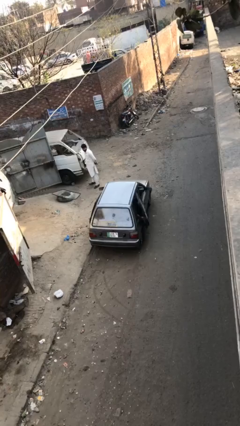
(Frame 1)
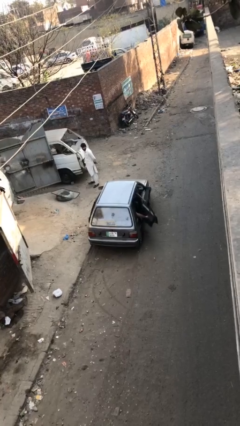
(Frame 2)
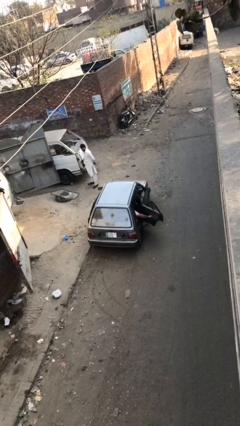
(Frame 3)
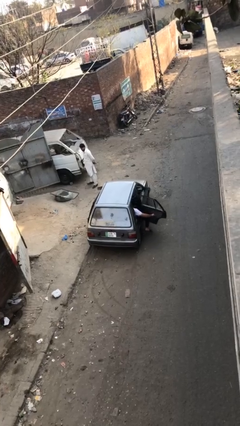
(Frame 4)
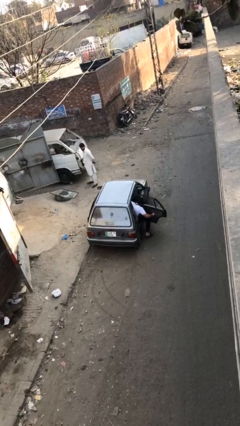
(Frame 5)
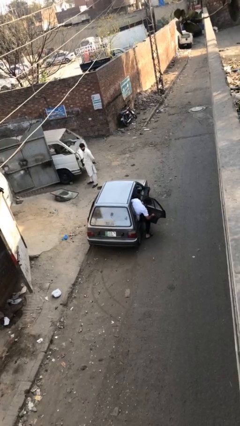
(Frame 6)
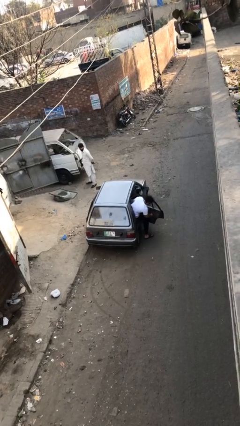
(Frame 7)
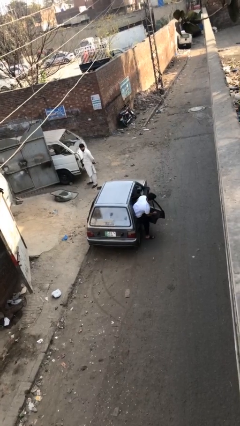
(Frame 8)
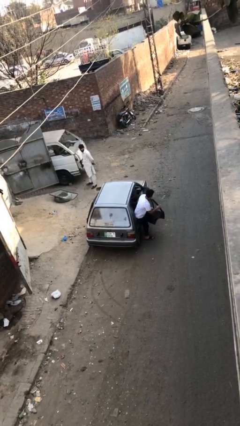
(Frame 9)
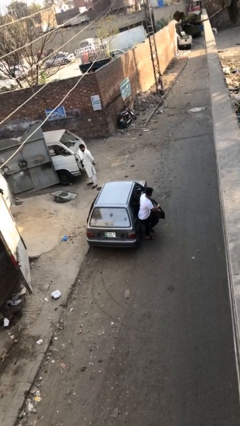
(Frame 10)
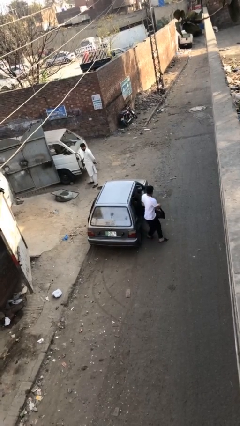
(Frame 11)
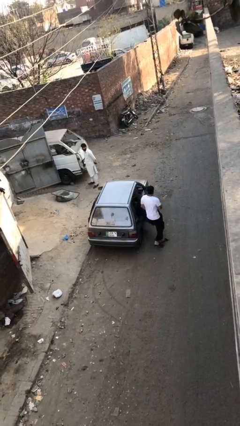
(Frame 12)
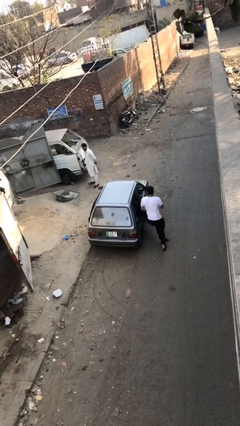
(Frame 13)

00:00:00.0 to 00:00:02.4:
car drops off person

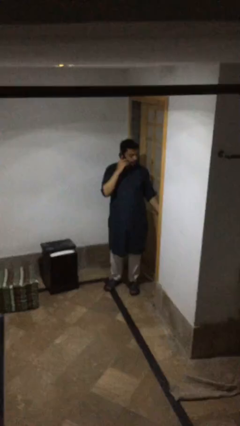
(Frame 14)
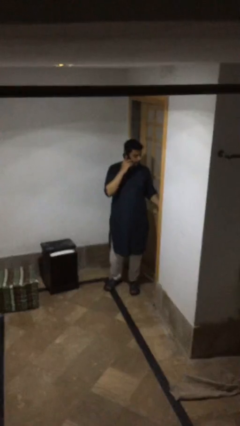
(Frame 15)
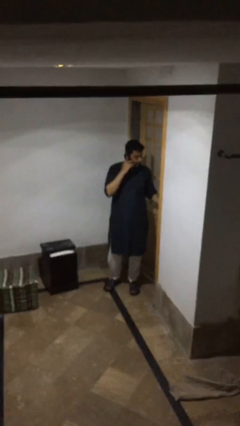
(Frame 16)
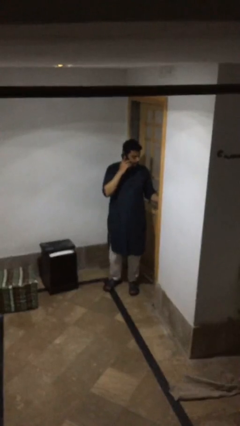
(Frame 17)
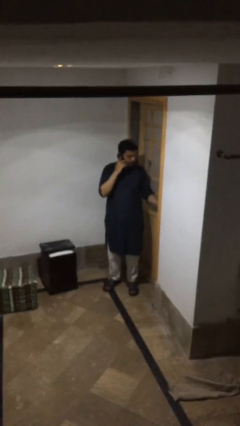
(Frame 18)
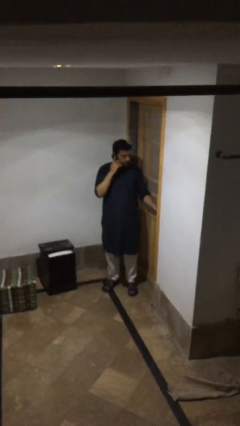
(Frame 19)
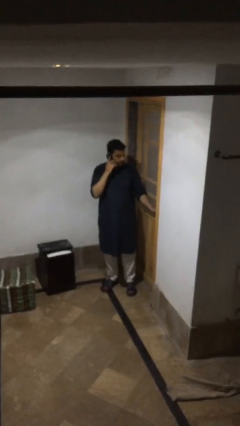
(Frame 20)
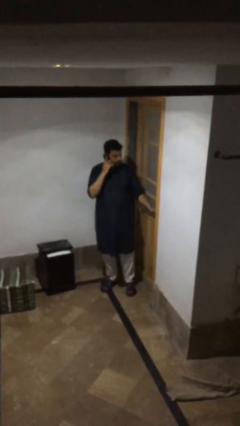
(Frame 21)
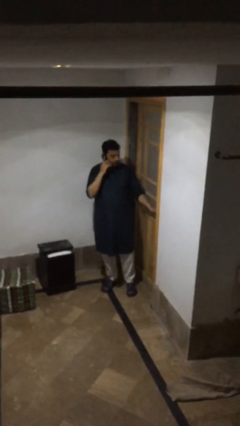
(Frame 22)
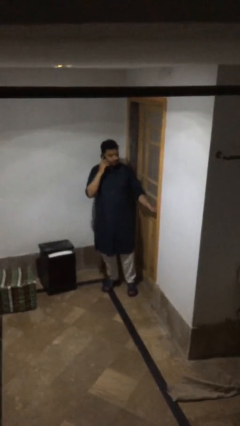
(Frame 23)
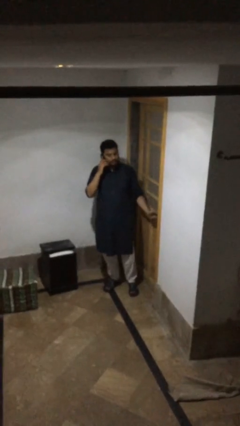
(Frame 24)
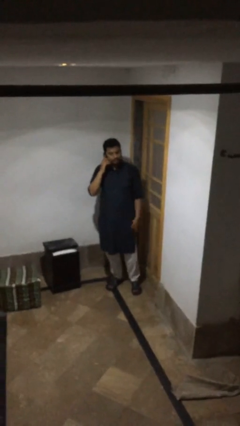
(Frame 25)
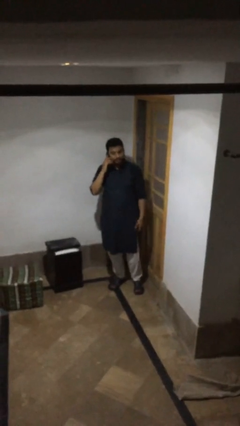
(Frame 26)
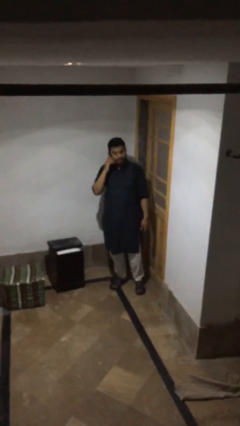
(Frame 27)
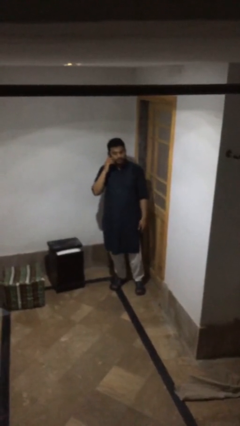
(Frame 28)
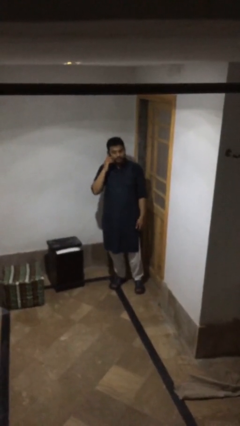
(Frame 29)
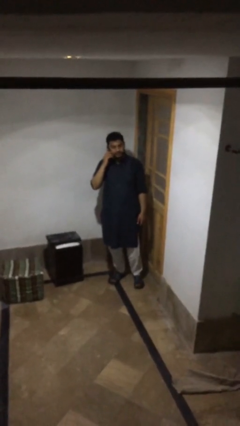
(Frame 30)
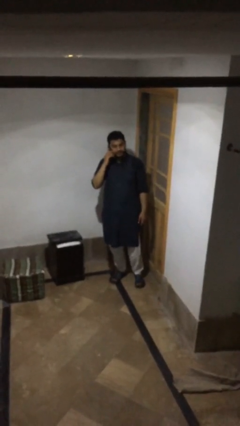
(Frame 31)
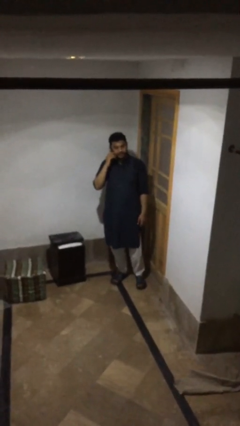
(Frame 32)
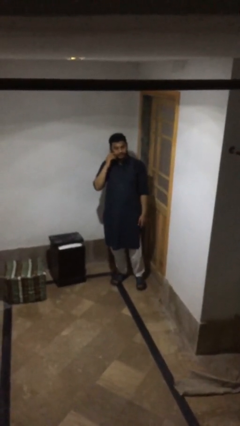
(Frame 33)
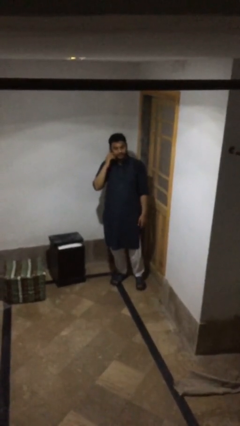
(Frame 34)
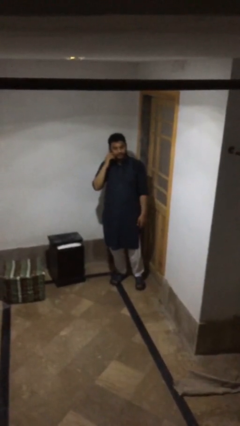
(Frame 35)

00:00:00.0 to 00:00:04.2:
person closes facility door

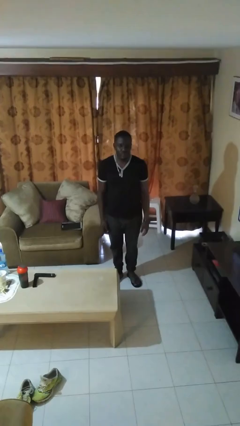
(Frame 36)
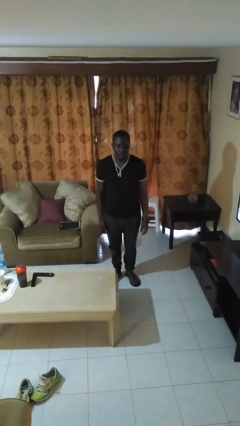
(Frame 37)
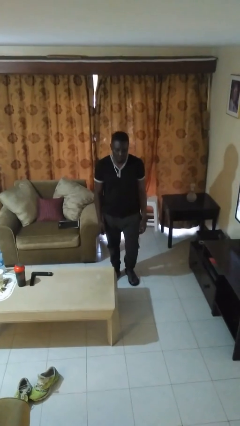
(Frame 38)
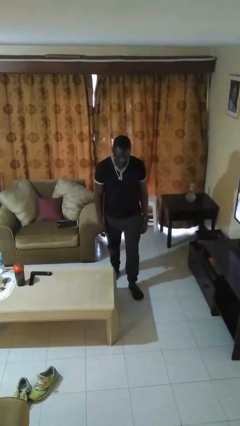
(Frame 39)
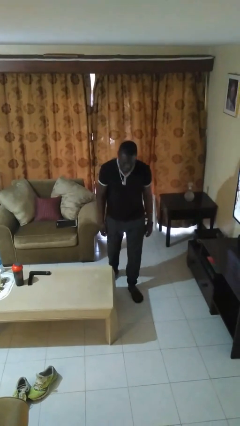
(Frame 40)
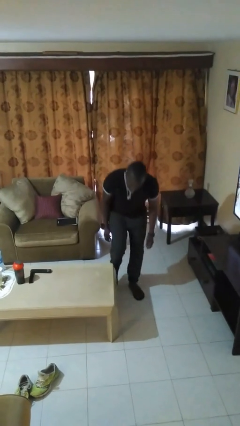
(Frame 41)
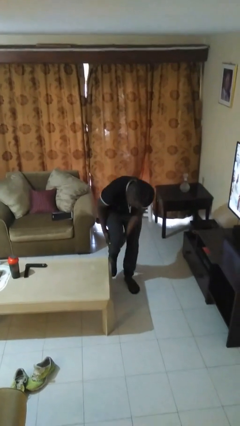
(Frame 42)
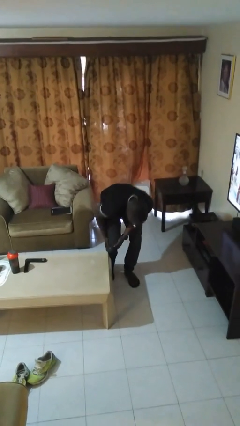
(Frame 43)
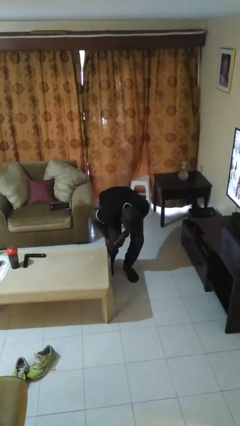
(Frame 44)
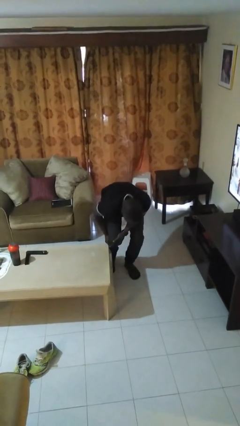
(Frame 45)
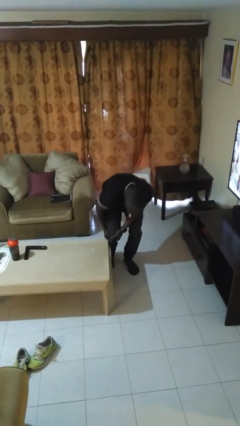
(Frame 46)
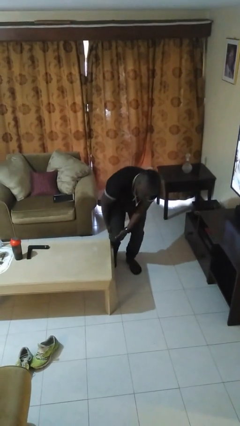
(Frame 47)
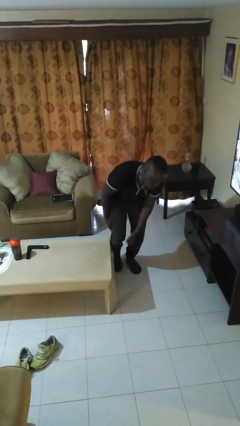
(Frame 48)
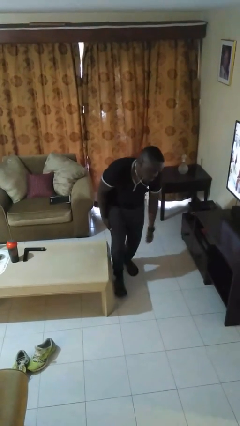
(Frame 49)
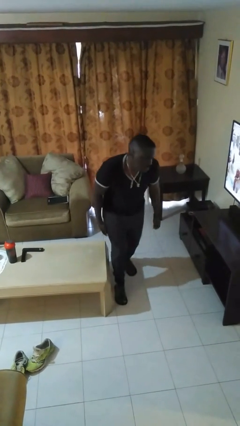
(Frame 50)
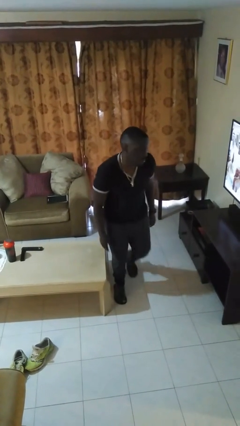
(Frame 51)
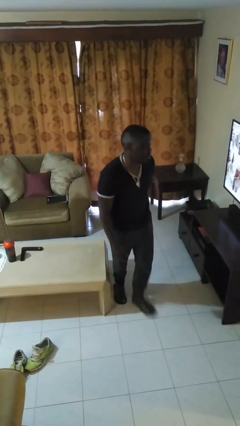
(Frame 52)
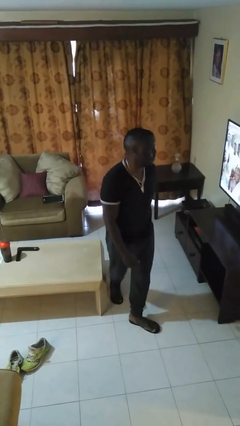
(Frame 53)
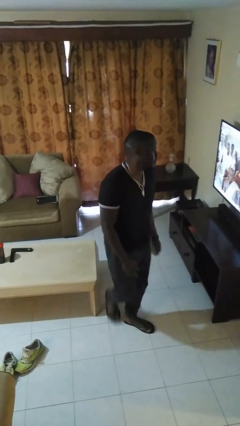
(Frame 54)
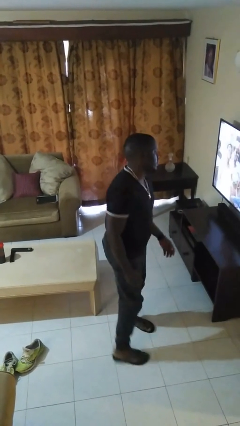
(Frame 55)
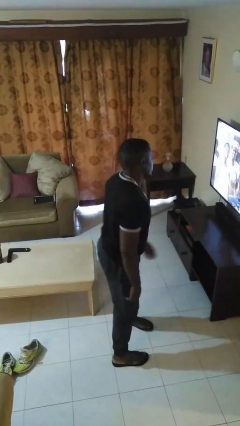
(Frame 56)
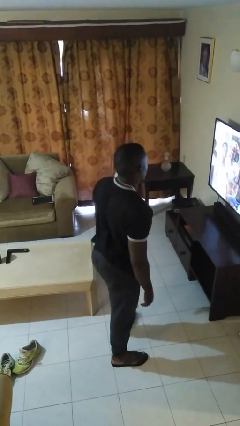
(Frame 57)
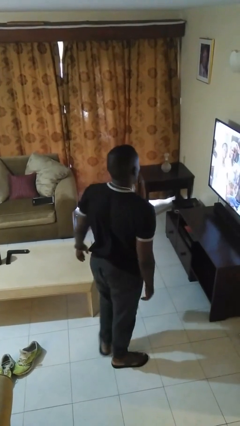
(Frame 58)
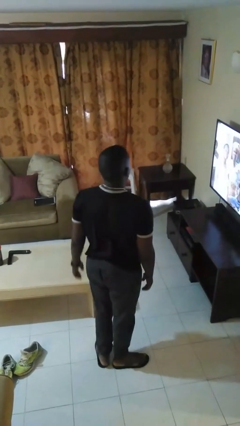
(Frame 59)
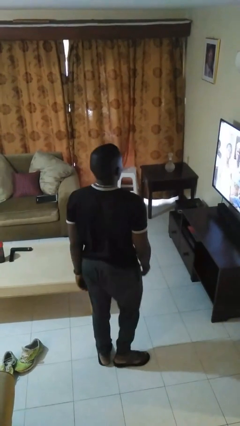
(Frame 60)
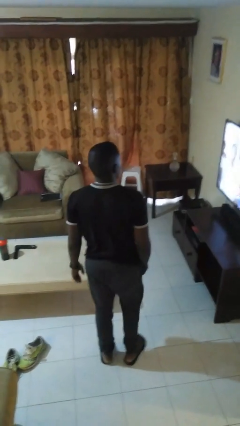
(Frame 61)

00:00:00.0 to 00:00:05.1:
person bumps into table

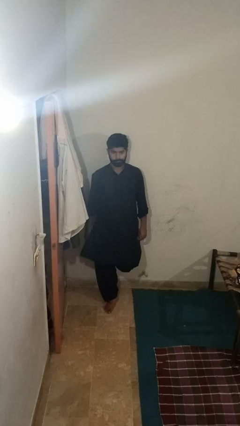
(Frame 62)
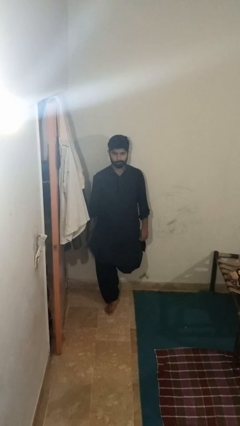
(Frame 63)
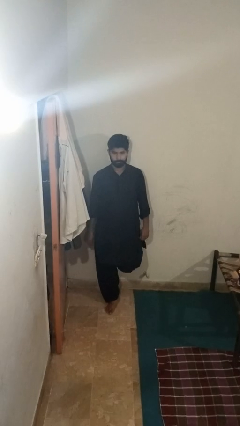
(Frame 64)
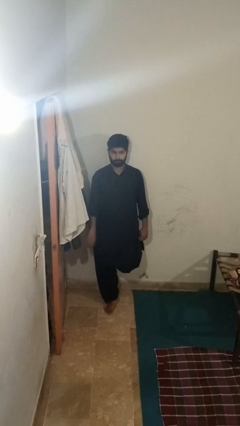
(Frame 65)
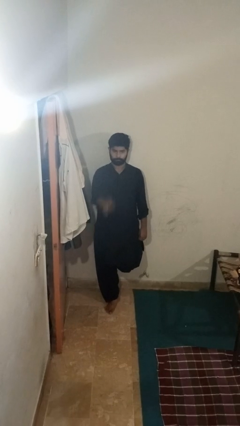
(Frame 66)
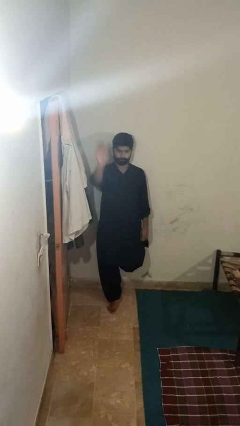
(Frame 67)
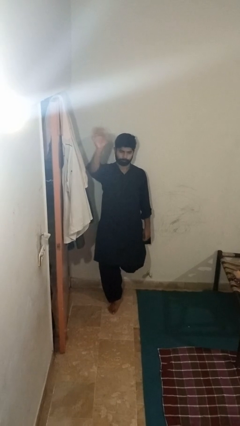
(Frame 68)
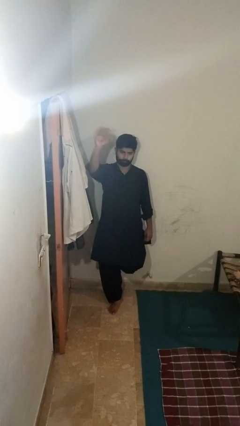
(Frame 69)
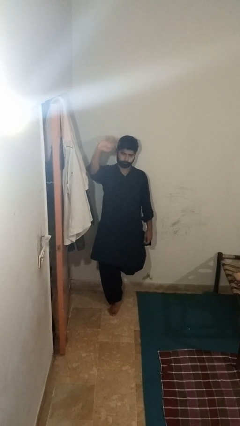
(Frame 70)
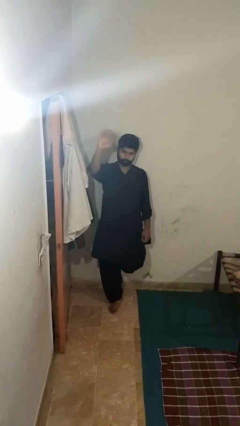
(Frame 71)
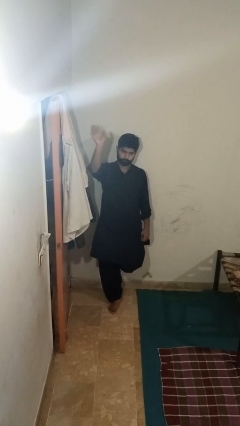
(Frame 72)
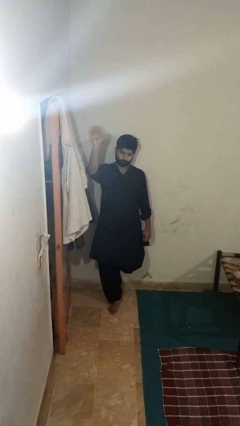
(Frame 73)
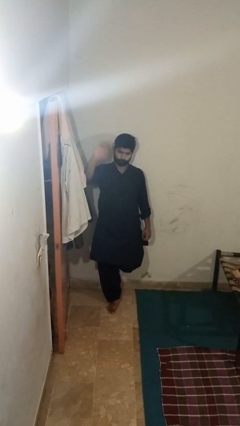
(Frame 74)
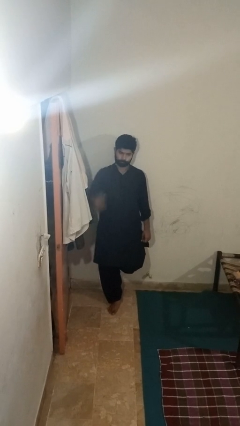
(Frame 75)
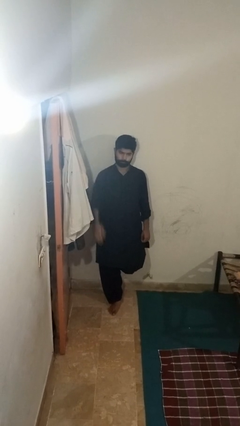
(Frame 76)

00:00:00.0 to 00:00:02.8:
person waves at person

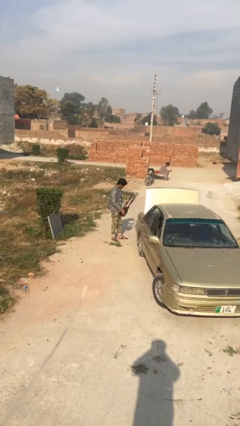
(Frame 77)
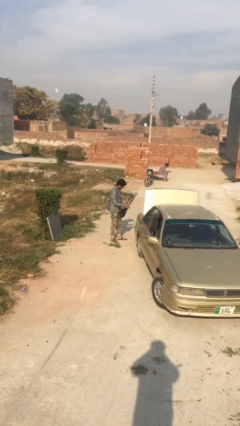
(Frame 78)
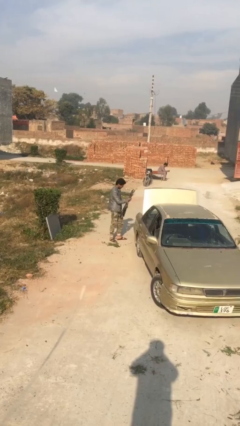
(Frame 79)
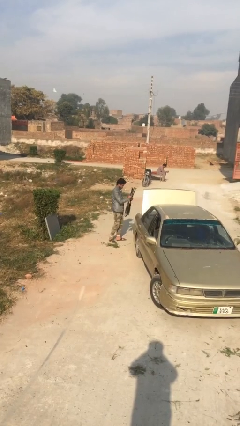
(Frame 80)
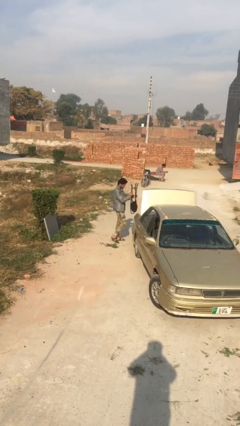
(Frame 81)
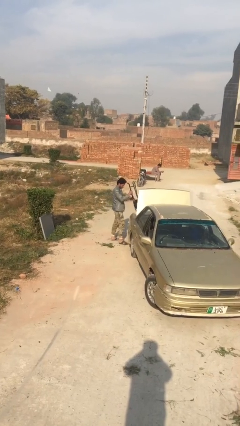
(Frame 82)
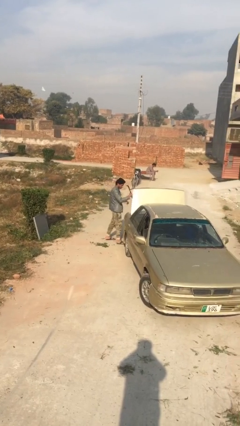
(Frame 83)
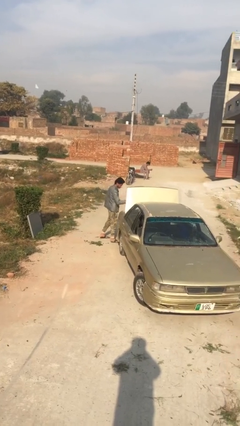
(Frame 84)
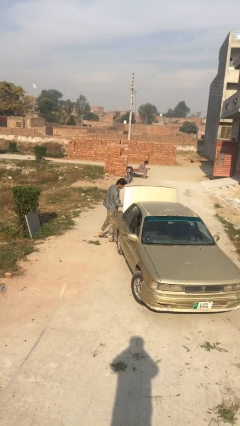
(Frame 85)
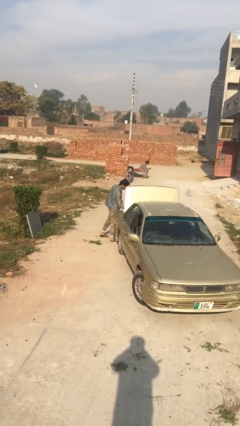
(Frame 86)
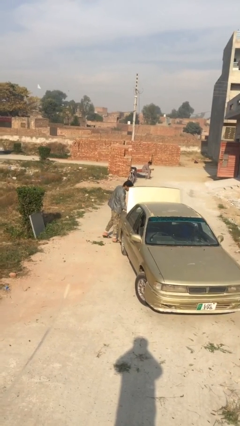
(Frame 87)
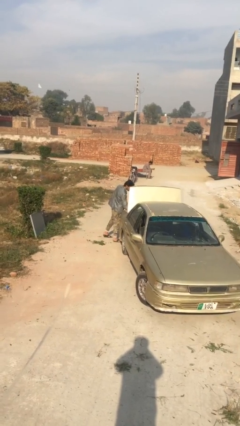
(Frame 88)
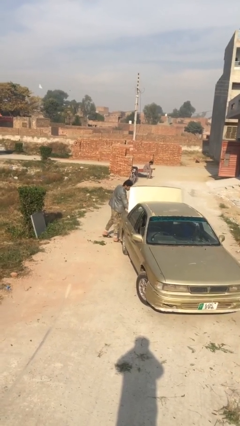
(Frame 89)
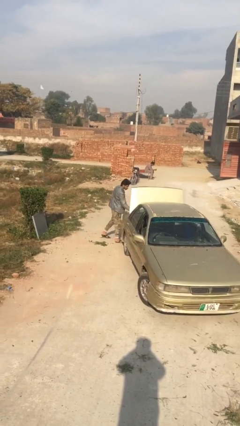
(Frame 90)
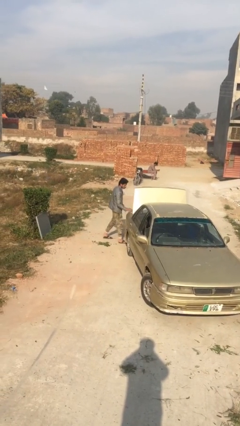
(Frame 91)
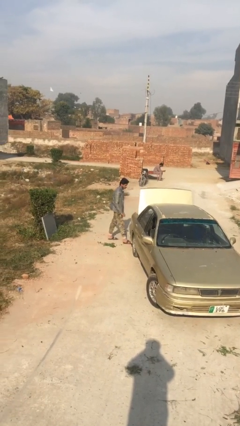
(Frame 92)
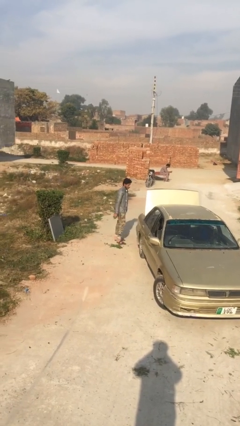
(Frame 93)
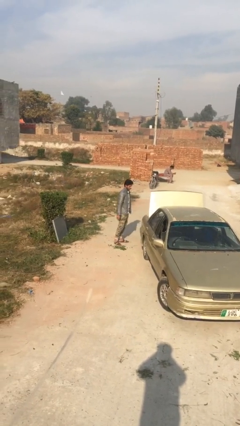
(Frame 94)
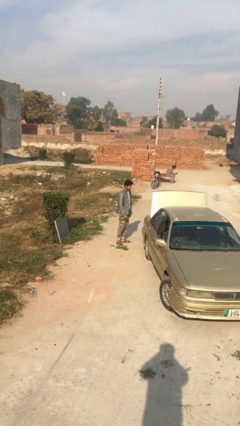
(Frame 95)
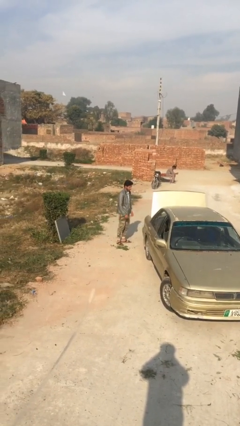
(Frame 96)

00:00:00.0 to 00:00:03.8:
person loads car
